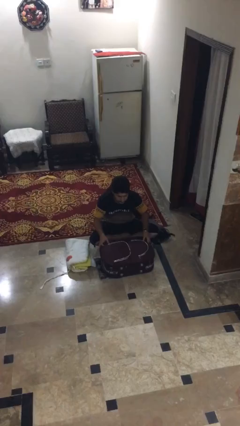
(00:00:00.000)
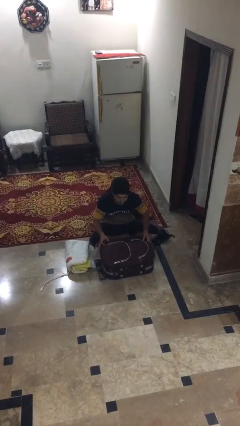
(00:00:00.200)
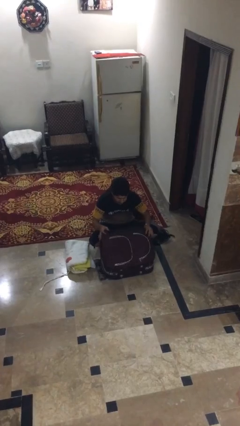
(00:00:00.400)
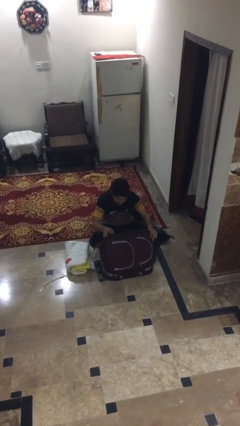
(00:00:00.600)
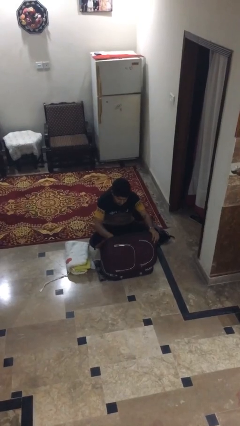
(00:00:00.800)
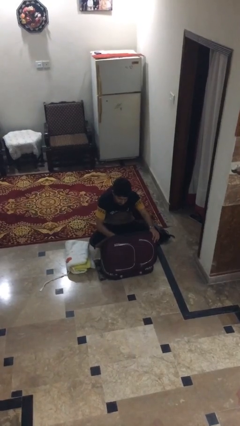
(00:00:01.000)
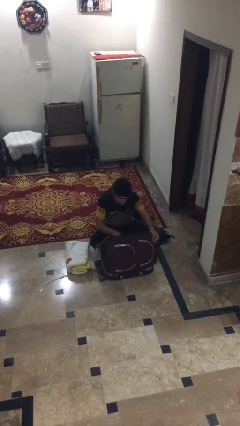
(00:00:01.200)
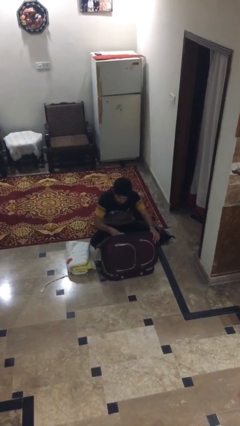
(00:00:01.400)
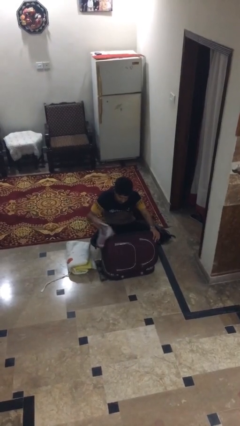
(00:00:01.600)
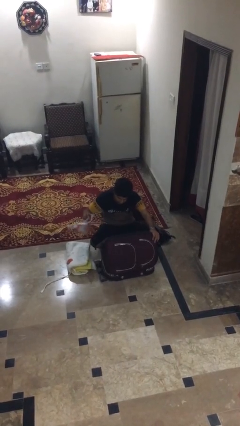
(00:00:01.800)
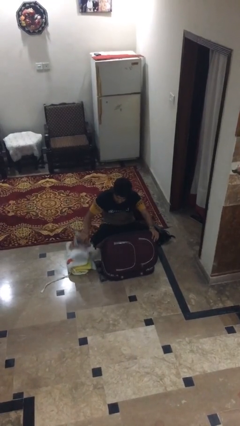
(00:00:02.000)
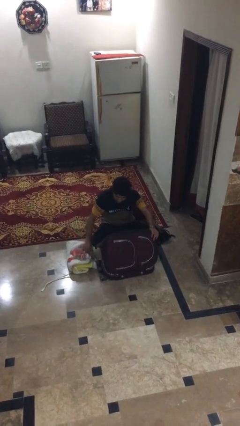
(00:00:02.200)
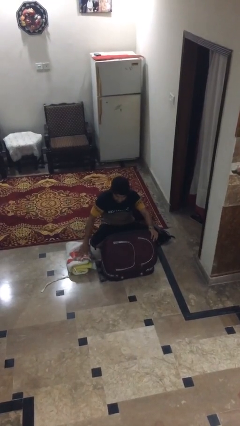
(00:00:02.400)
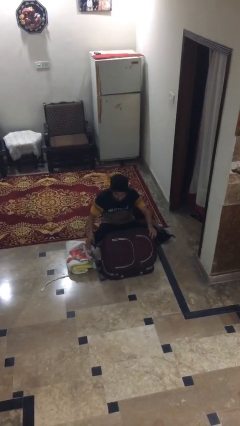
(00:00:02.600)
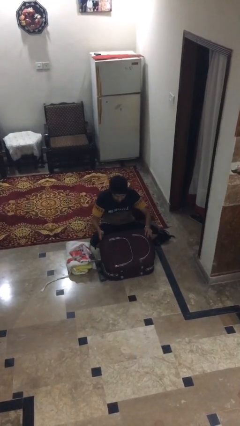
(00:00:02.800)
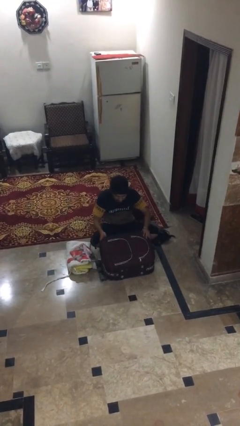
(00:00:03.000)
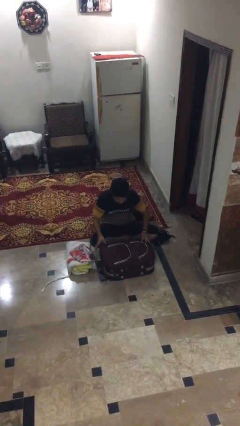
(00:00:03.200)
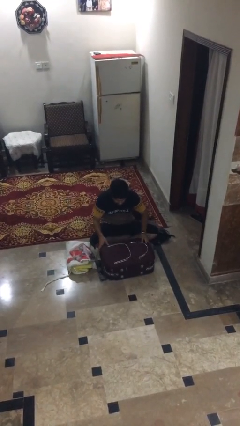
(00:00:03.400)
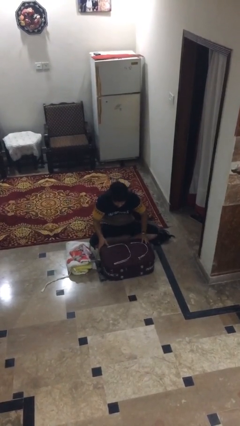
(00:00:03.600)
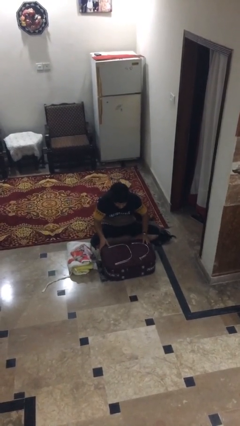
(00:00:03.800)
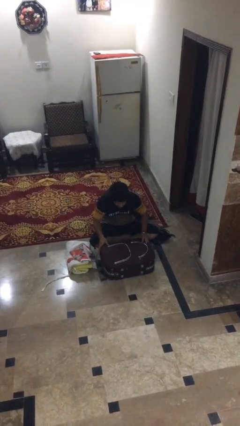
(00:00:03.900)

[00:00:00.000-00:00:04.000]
person unloads clothes from suitcase

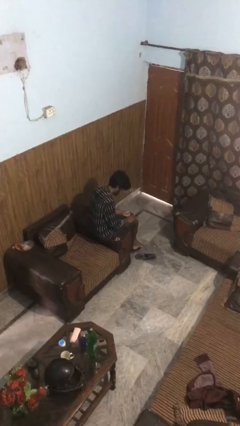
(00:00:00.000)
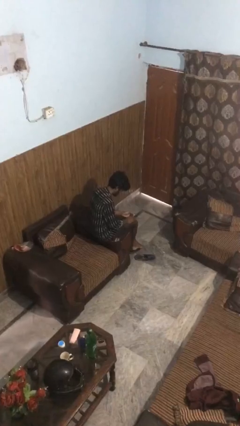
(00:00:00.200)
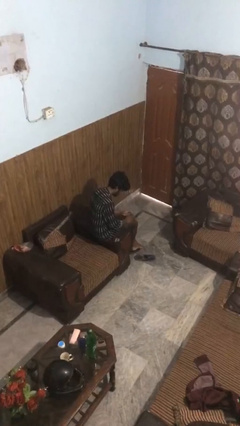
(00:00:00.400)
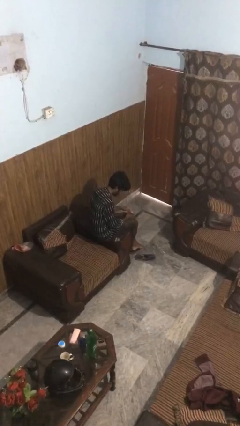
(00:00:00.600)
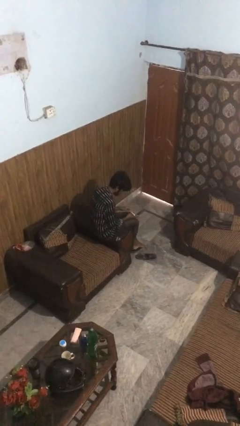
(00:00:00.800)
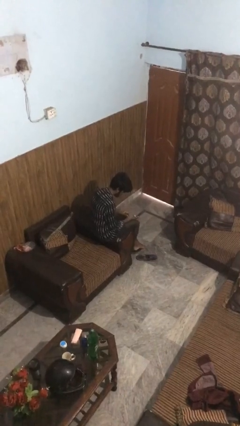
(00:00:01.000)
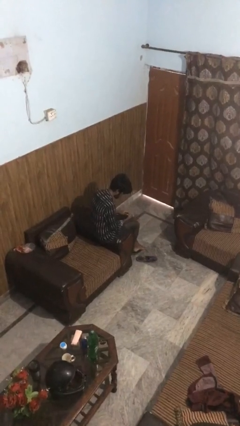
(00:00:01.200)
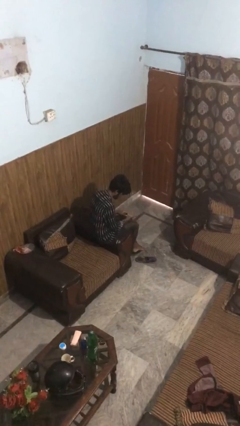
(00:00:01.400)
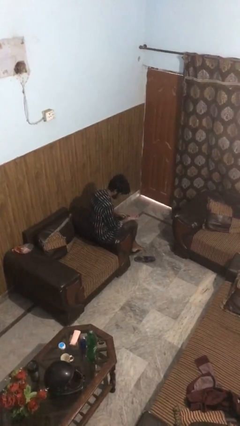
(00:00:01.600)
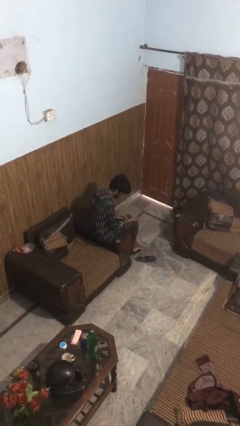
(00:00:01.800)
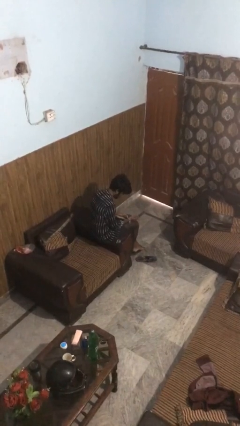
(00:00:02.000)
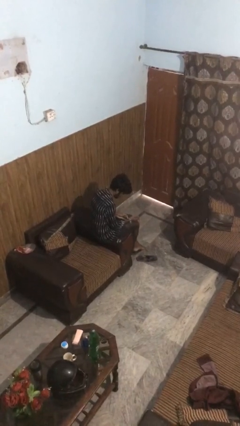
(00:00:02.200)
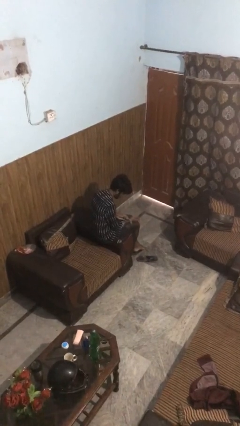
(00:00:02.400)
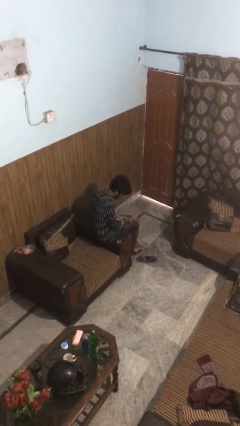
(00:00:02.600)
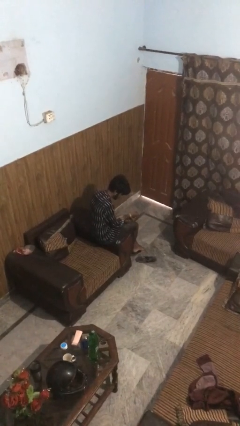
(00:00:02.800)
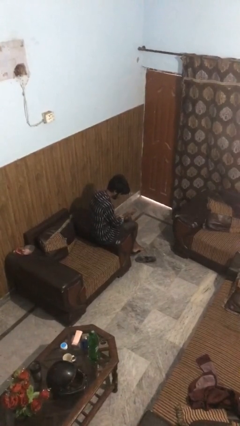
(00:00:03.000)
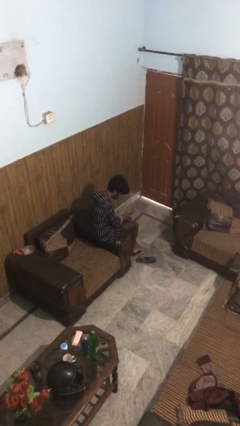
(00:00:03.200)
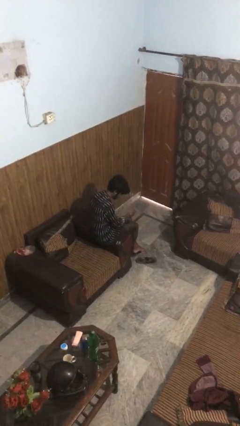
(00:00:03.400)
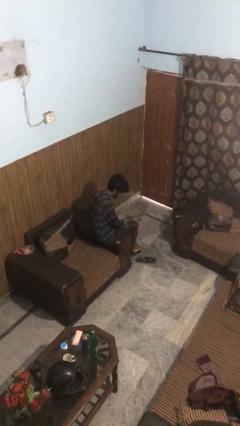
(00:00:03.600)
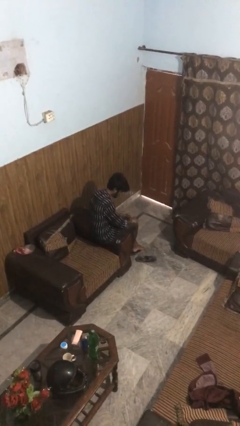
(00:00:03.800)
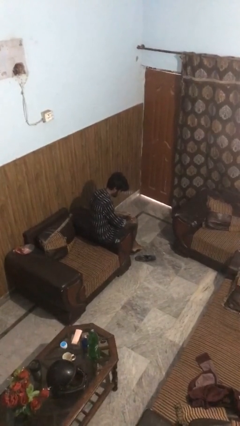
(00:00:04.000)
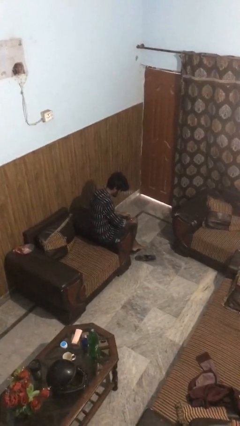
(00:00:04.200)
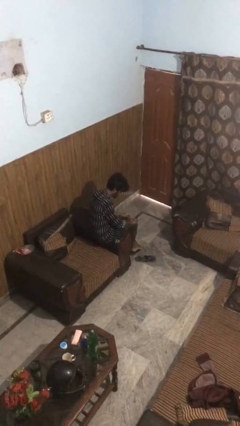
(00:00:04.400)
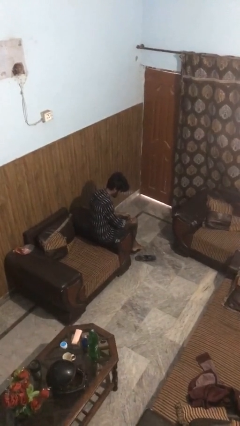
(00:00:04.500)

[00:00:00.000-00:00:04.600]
person puts on wristwatch

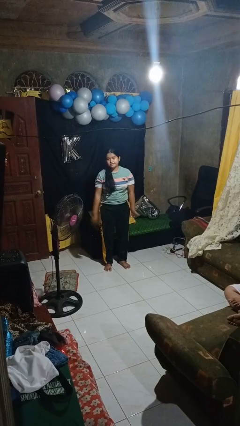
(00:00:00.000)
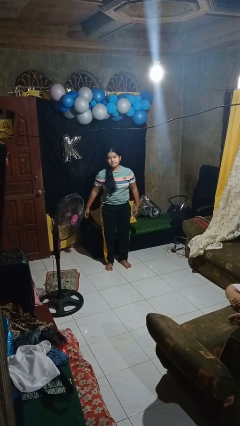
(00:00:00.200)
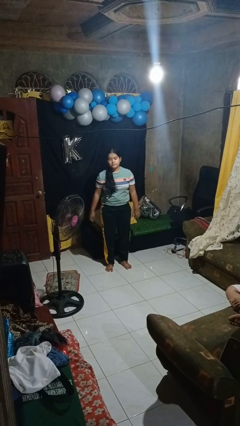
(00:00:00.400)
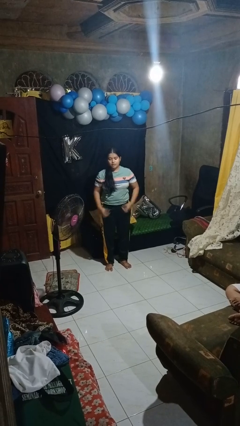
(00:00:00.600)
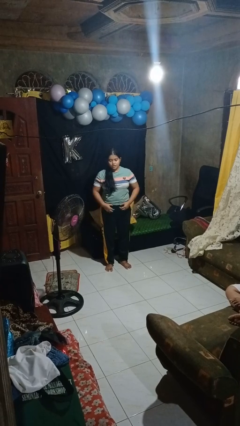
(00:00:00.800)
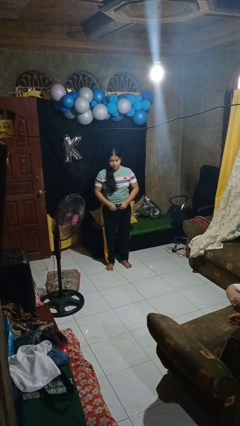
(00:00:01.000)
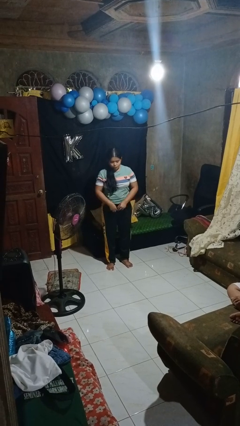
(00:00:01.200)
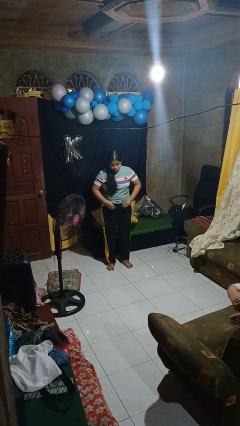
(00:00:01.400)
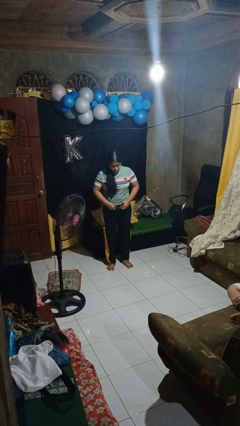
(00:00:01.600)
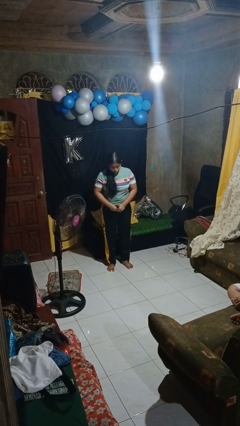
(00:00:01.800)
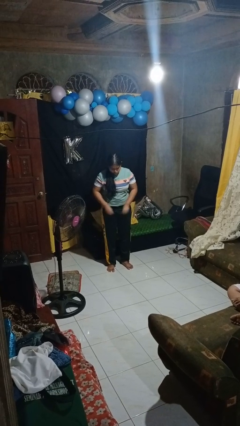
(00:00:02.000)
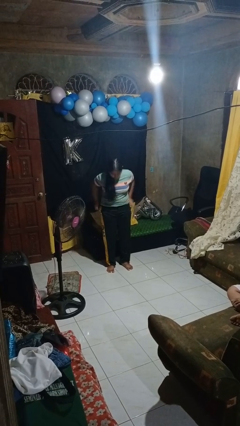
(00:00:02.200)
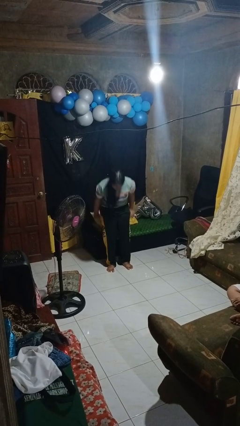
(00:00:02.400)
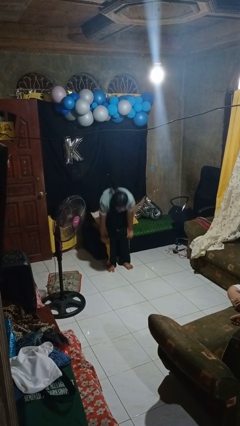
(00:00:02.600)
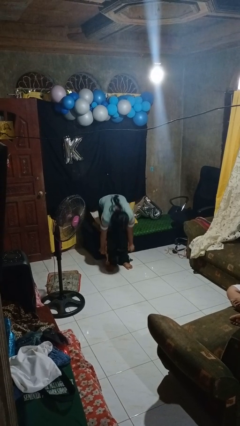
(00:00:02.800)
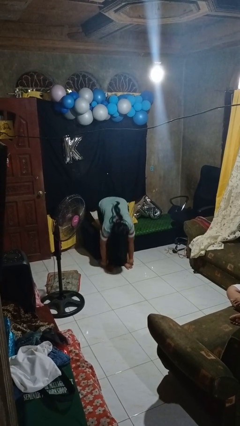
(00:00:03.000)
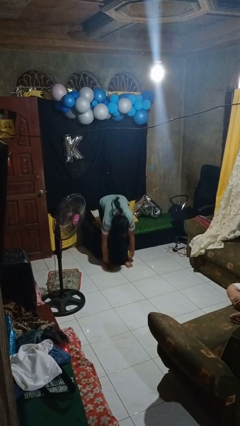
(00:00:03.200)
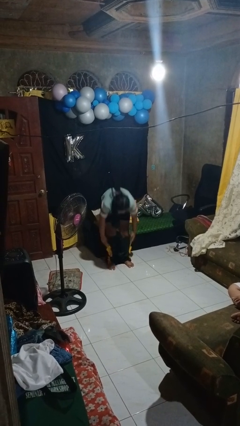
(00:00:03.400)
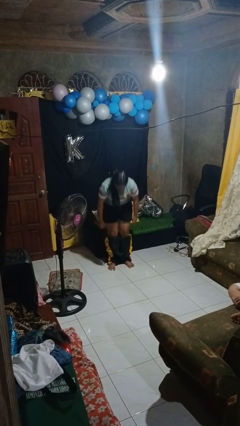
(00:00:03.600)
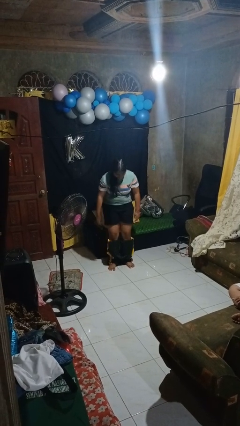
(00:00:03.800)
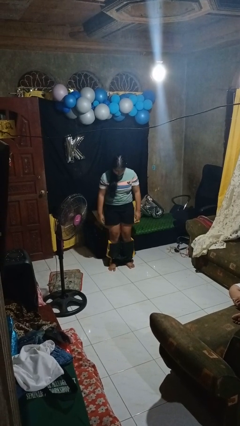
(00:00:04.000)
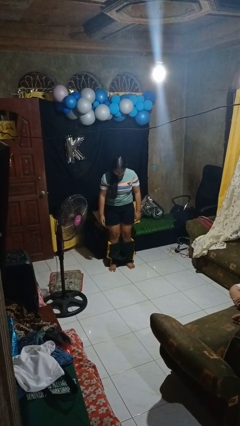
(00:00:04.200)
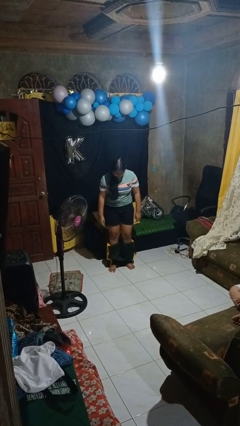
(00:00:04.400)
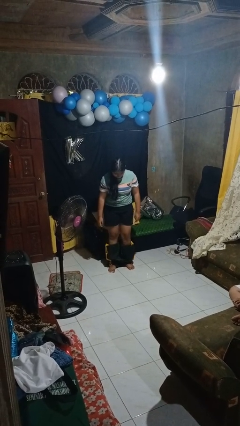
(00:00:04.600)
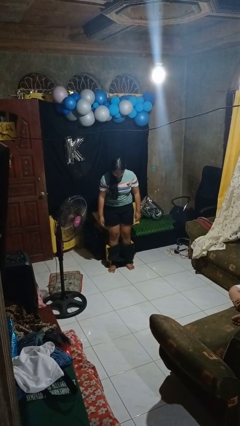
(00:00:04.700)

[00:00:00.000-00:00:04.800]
person takes off pants

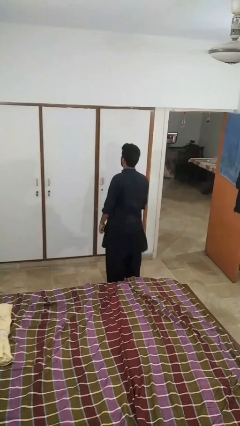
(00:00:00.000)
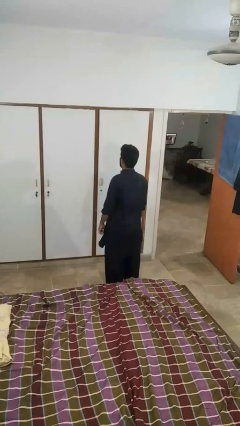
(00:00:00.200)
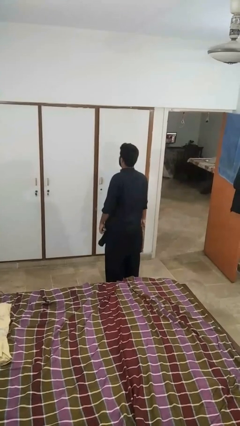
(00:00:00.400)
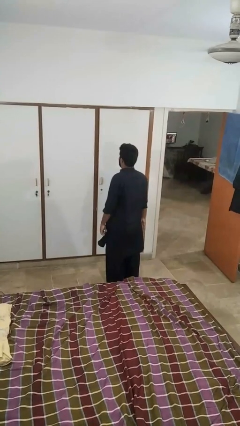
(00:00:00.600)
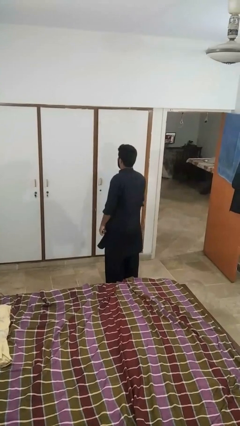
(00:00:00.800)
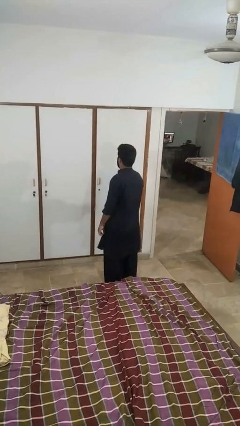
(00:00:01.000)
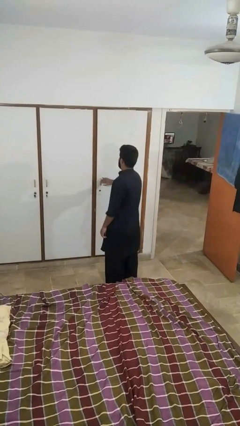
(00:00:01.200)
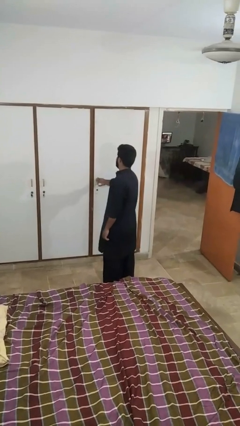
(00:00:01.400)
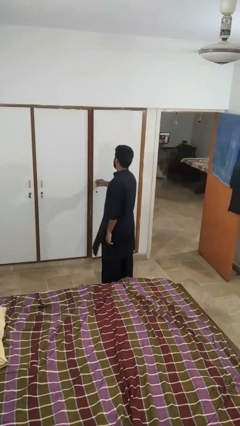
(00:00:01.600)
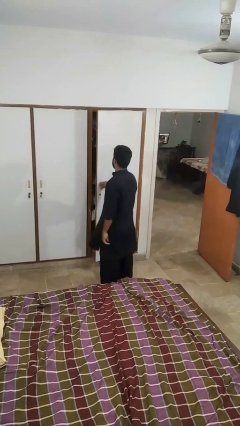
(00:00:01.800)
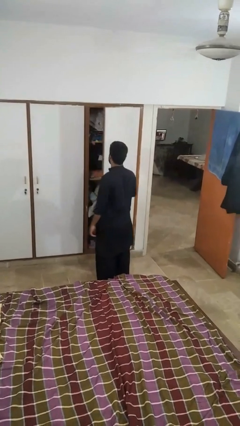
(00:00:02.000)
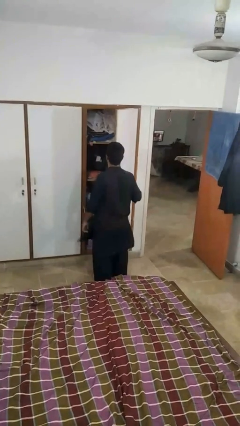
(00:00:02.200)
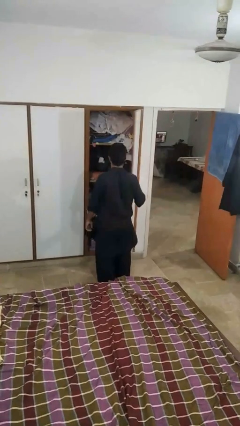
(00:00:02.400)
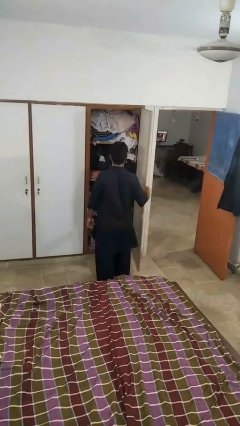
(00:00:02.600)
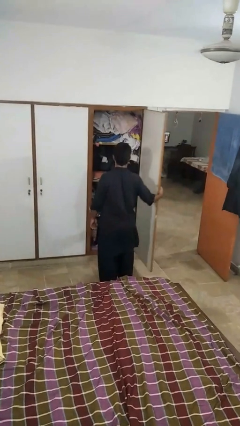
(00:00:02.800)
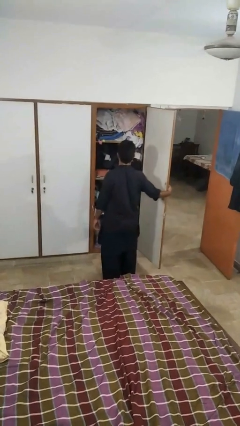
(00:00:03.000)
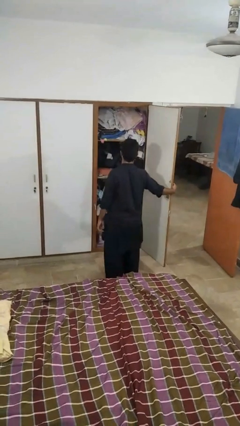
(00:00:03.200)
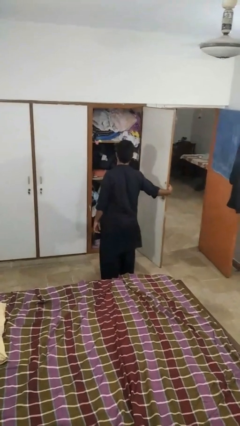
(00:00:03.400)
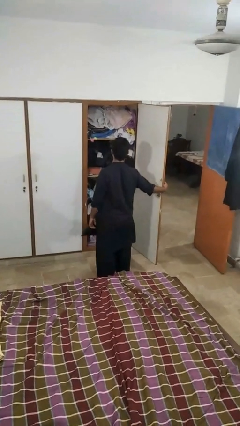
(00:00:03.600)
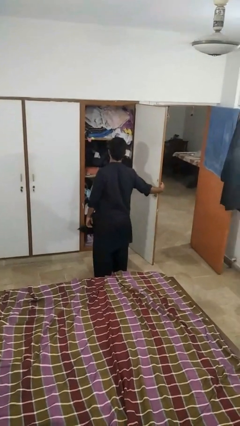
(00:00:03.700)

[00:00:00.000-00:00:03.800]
person opens closet door
